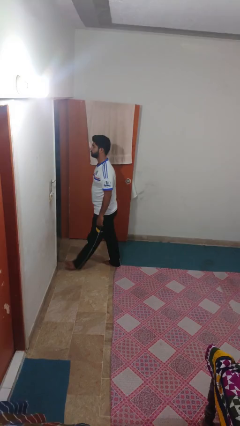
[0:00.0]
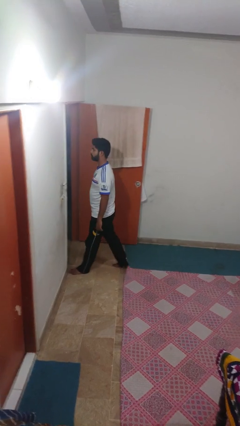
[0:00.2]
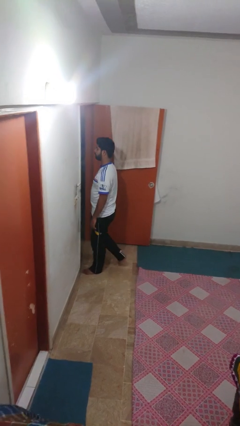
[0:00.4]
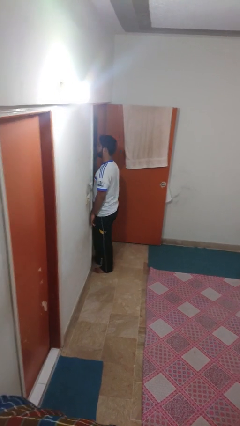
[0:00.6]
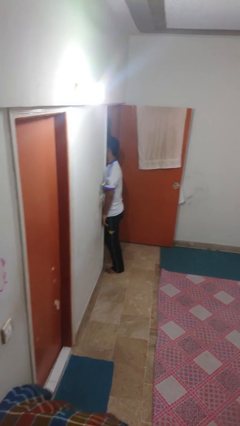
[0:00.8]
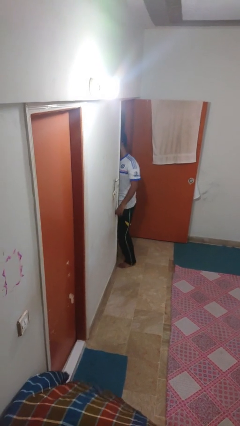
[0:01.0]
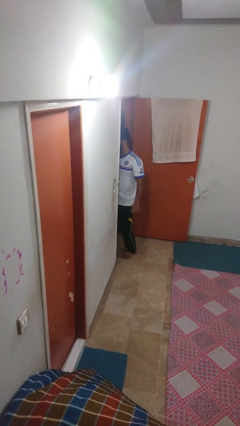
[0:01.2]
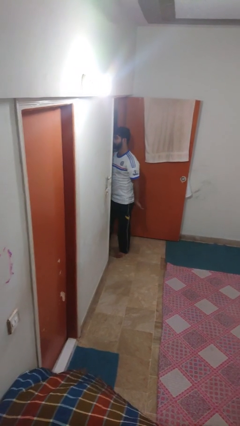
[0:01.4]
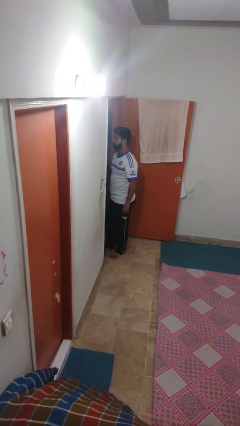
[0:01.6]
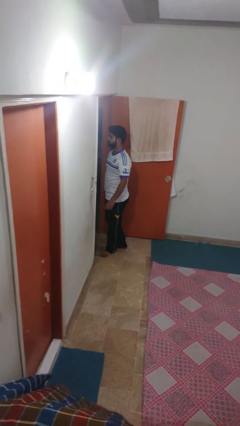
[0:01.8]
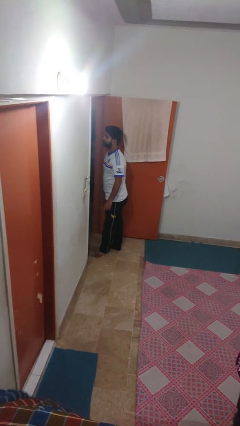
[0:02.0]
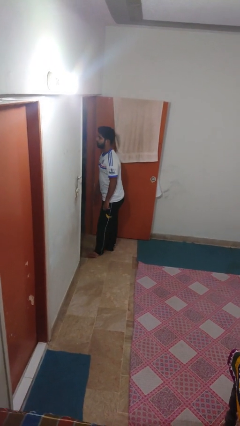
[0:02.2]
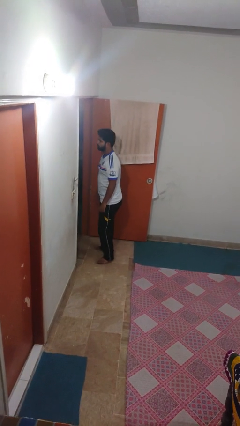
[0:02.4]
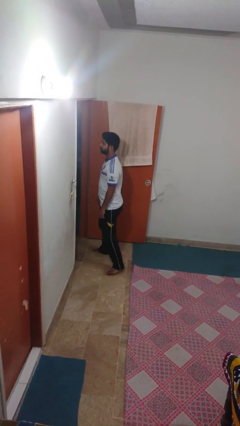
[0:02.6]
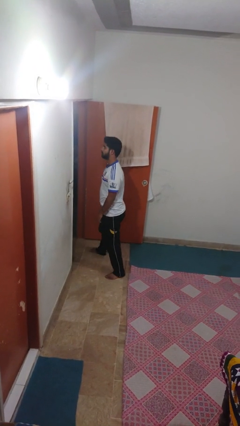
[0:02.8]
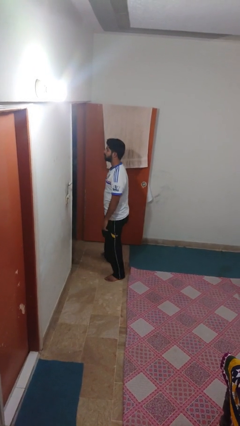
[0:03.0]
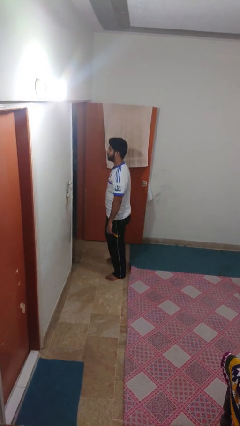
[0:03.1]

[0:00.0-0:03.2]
person bumps into wall

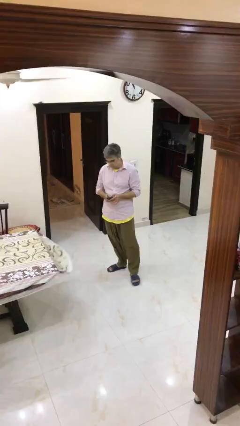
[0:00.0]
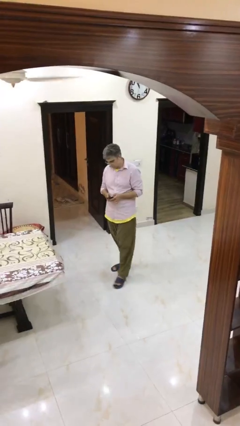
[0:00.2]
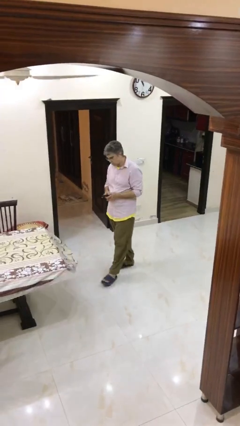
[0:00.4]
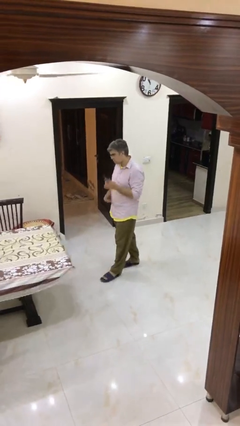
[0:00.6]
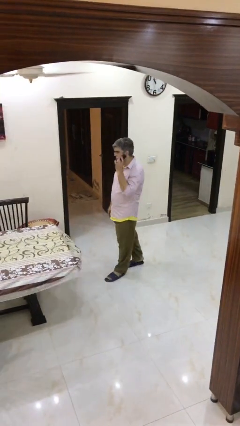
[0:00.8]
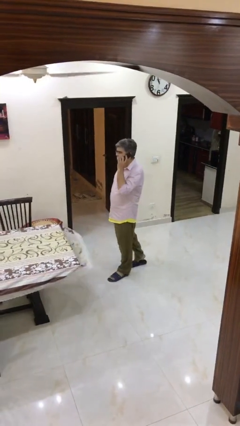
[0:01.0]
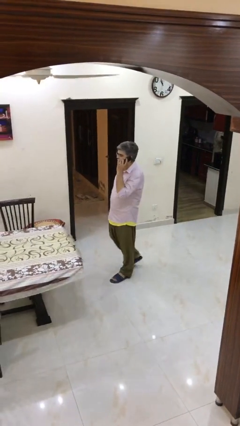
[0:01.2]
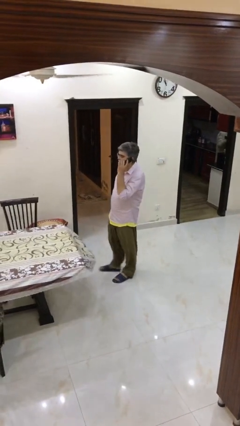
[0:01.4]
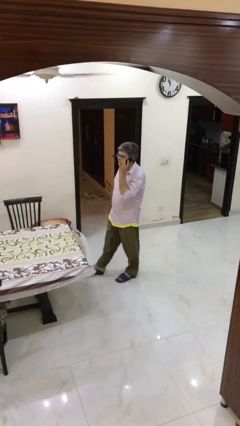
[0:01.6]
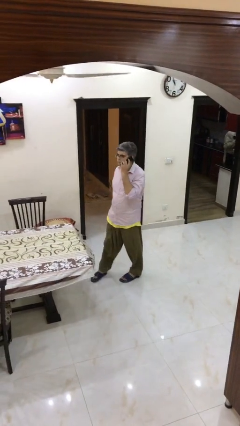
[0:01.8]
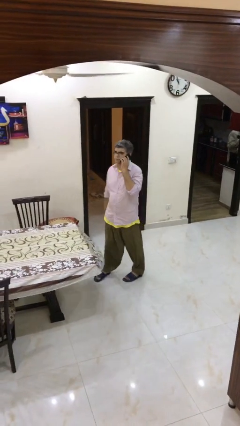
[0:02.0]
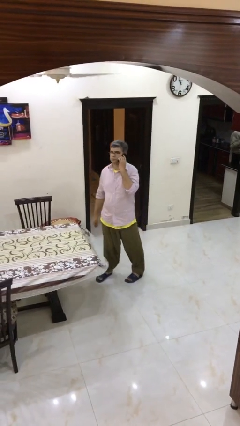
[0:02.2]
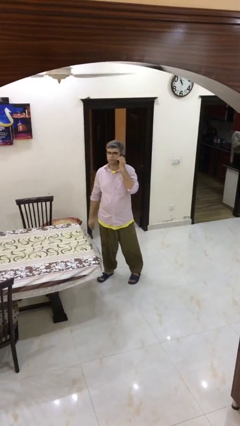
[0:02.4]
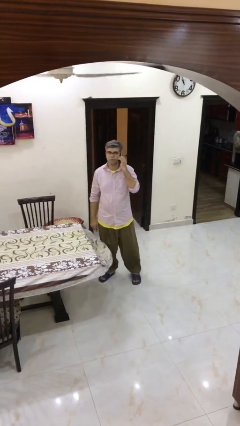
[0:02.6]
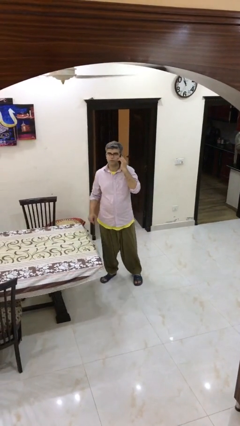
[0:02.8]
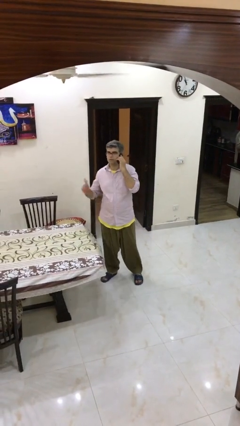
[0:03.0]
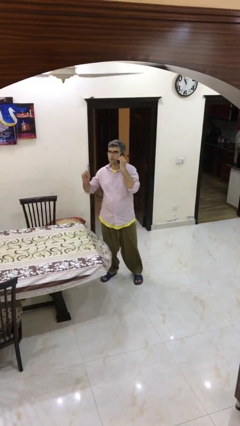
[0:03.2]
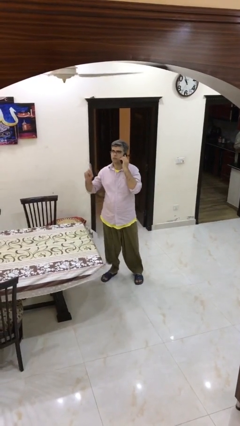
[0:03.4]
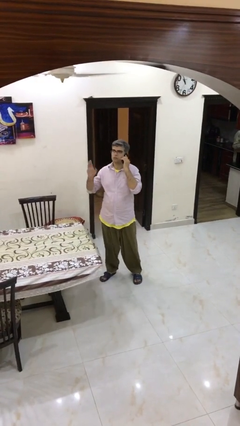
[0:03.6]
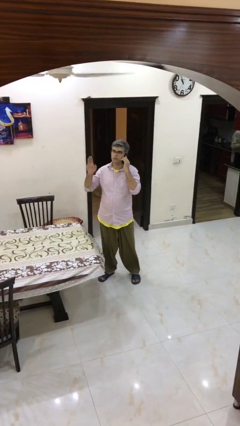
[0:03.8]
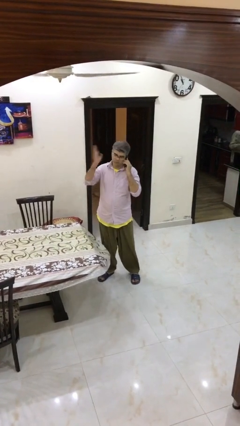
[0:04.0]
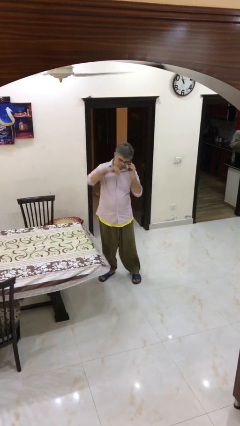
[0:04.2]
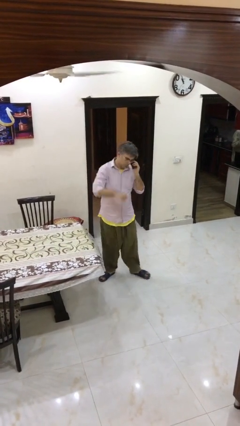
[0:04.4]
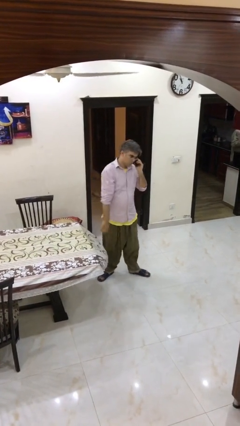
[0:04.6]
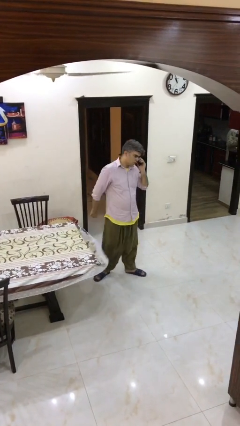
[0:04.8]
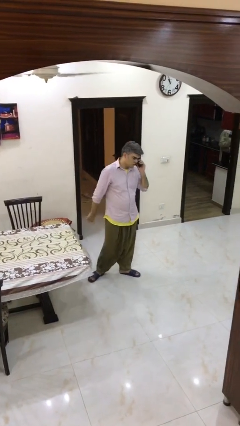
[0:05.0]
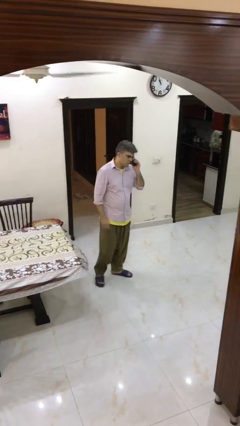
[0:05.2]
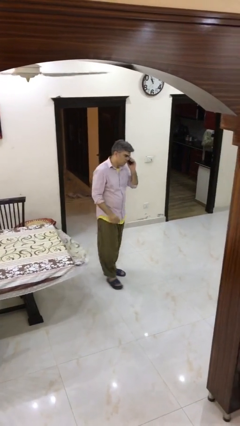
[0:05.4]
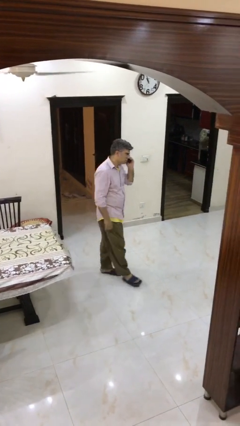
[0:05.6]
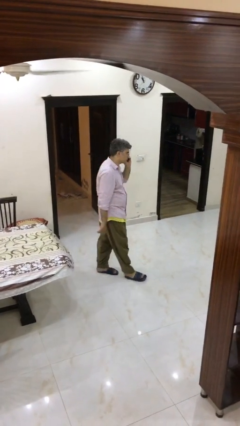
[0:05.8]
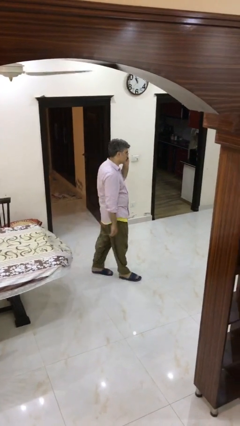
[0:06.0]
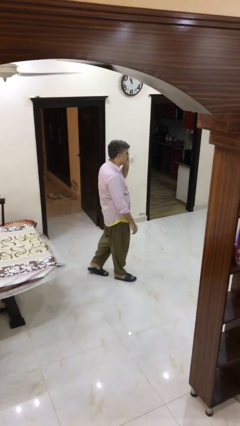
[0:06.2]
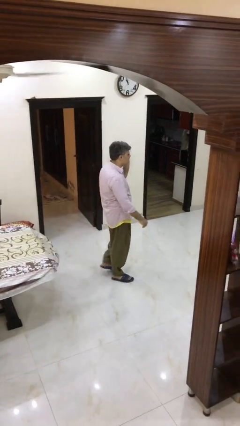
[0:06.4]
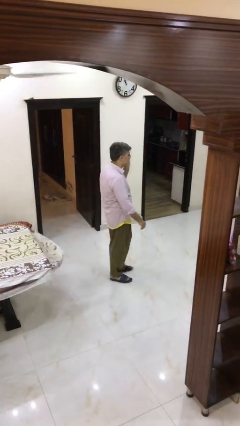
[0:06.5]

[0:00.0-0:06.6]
person talks on phone

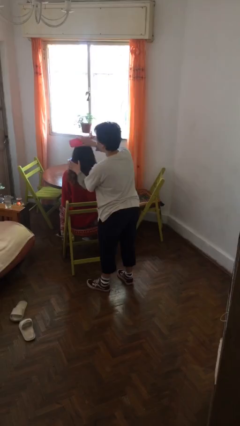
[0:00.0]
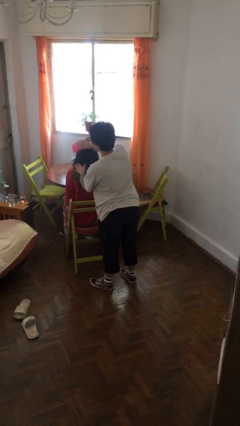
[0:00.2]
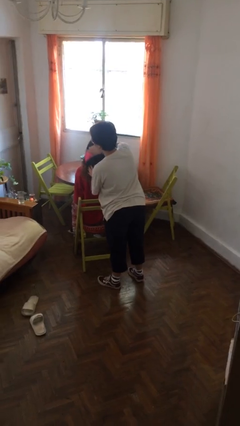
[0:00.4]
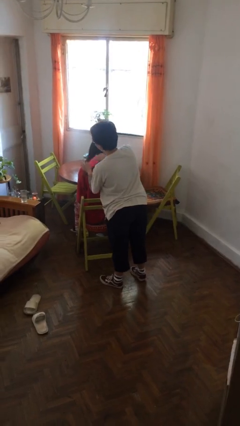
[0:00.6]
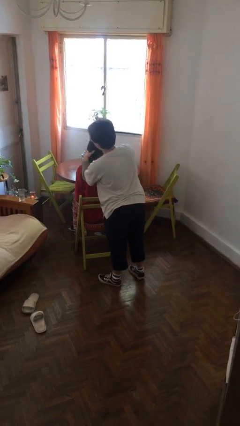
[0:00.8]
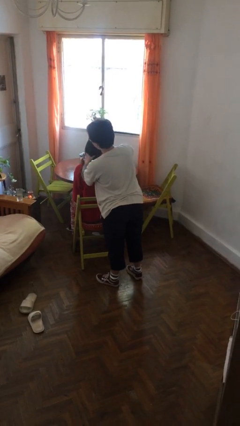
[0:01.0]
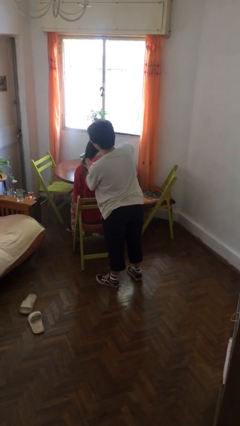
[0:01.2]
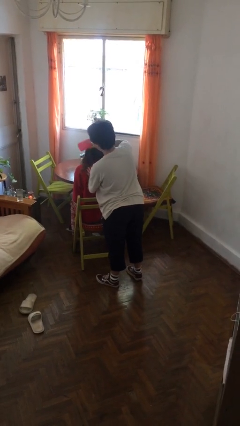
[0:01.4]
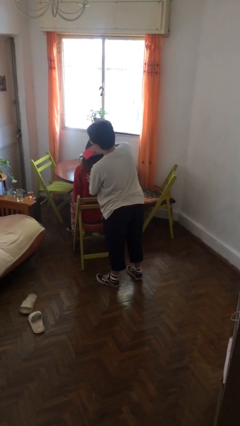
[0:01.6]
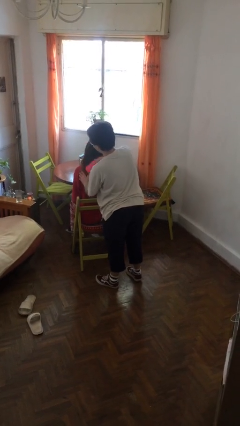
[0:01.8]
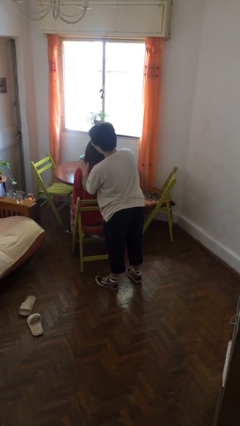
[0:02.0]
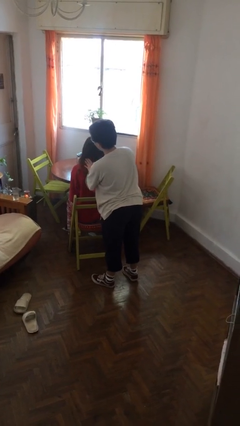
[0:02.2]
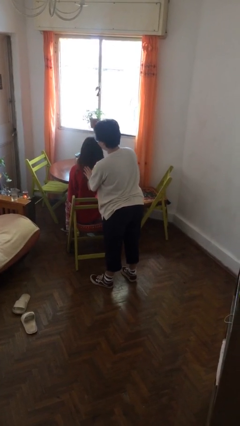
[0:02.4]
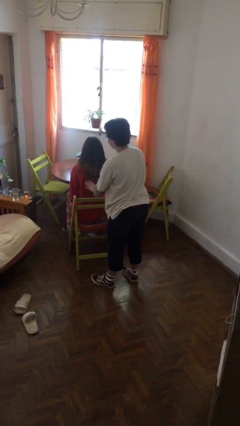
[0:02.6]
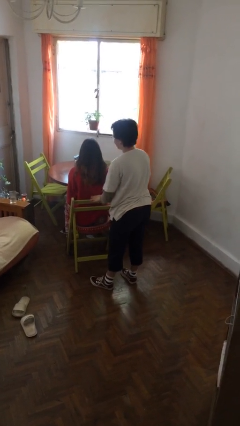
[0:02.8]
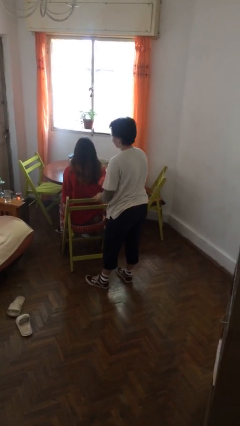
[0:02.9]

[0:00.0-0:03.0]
person brushes hair of person

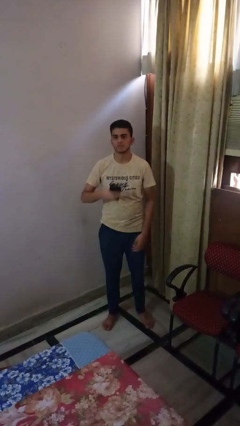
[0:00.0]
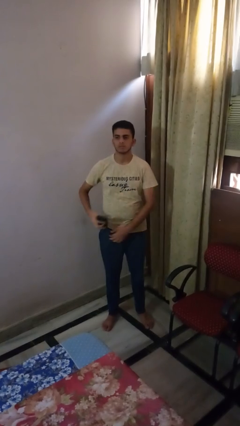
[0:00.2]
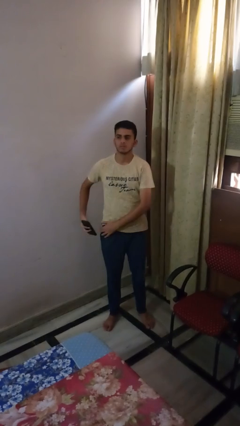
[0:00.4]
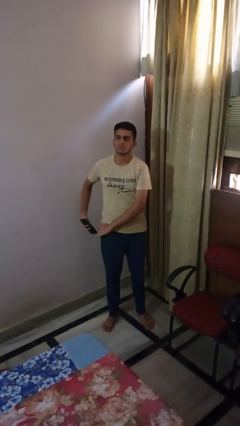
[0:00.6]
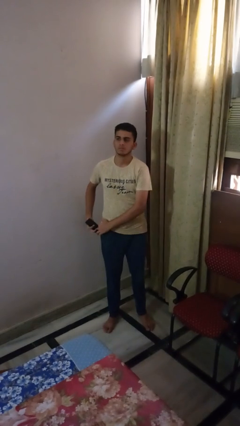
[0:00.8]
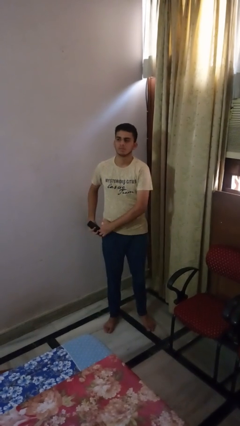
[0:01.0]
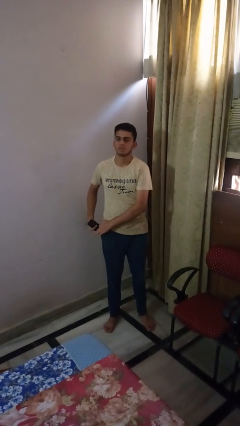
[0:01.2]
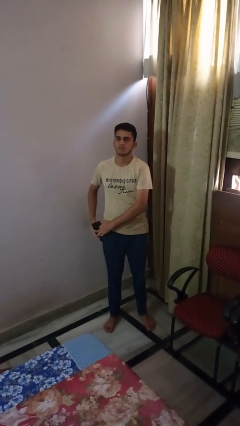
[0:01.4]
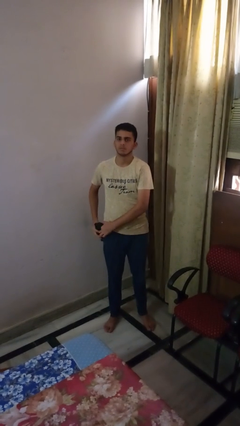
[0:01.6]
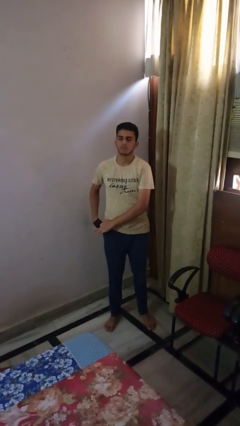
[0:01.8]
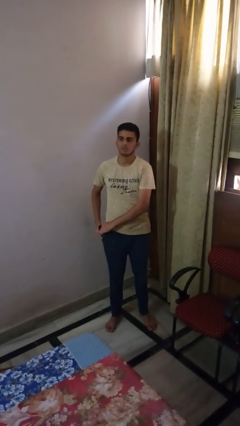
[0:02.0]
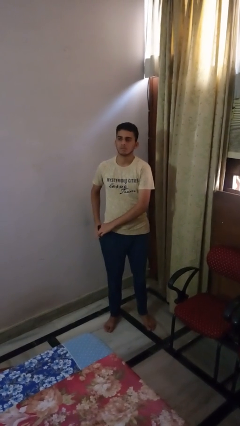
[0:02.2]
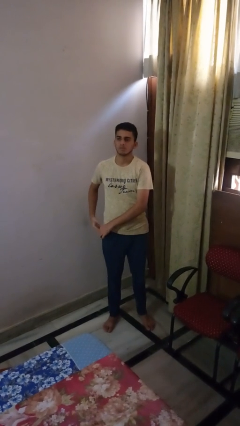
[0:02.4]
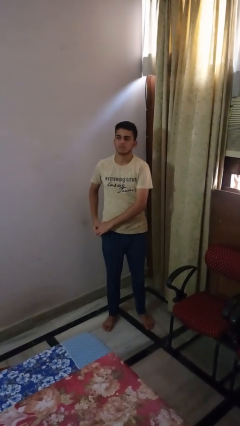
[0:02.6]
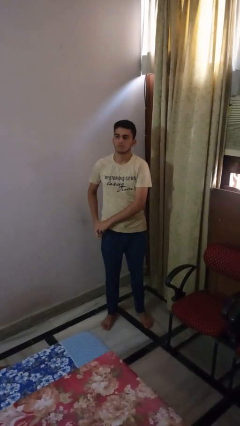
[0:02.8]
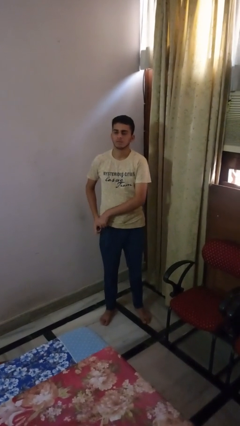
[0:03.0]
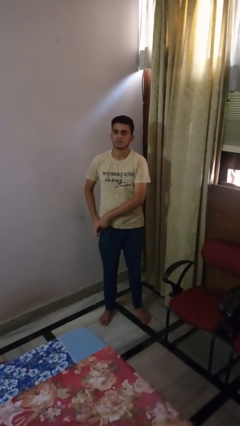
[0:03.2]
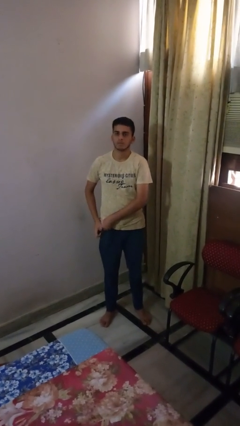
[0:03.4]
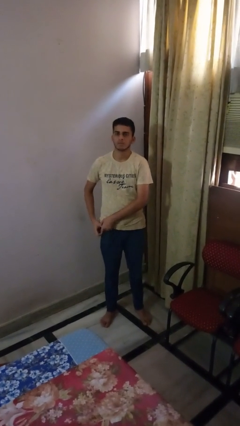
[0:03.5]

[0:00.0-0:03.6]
person puts phone into pocket

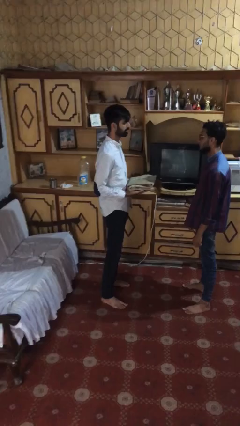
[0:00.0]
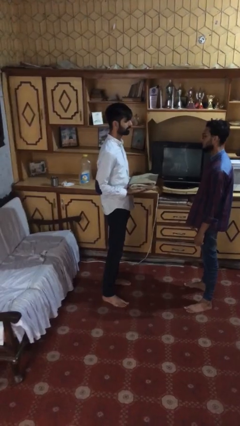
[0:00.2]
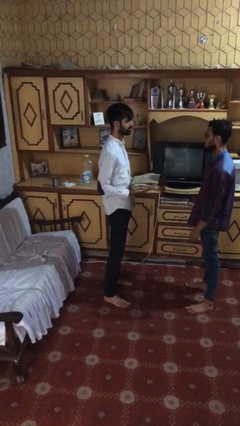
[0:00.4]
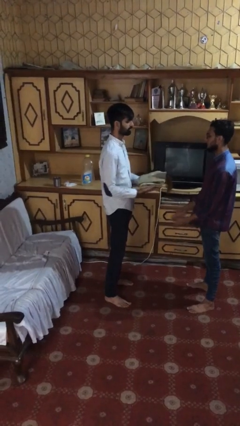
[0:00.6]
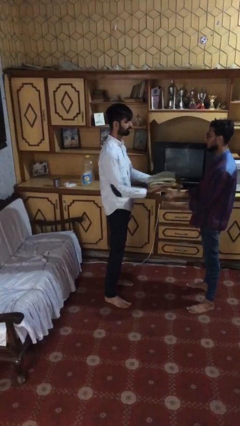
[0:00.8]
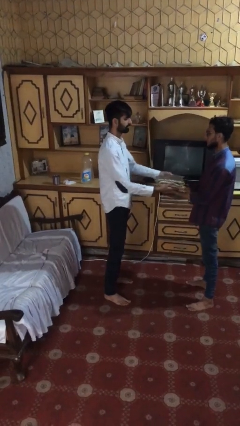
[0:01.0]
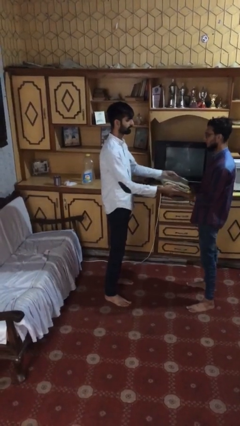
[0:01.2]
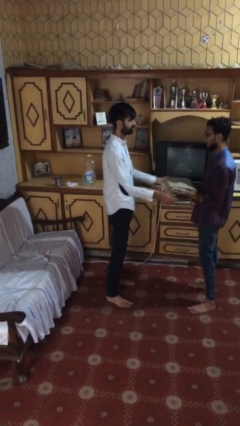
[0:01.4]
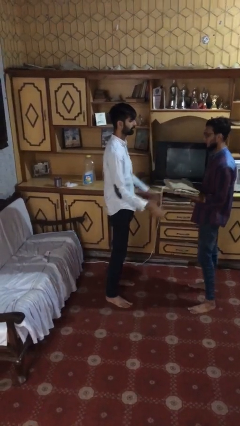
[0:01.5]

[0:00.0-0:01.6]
person transfers object to person
